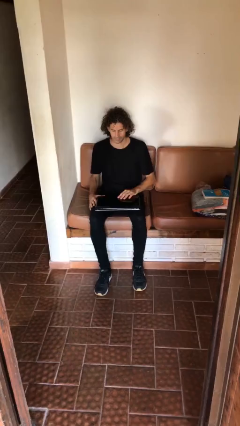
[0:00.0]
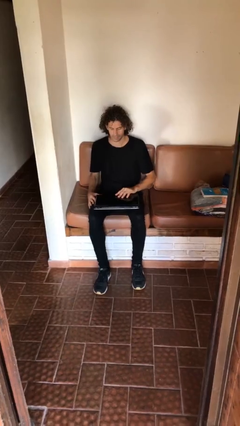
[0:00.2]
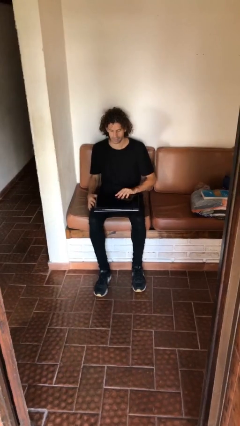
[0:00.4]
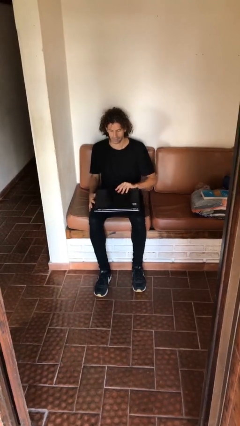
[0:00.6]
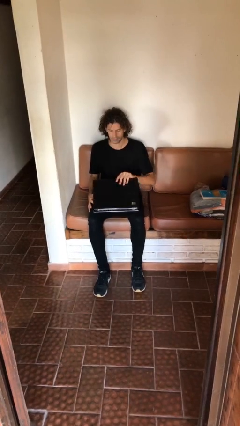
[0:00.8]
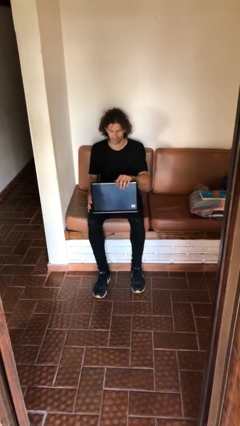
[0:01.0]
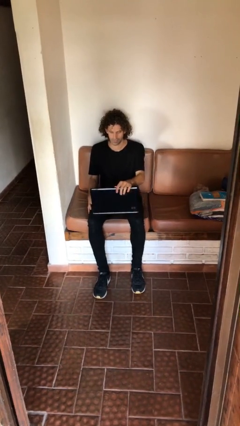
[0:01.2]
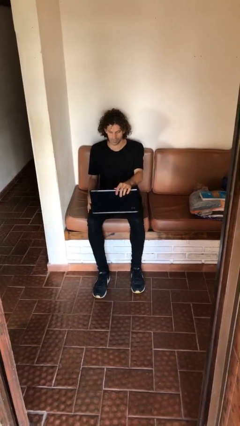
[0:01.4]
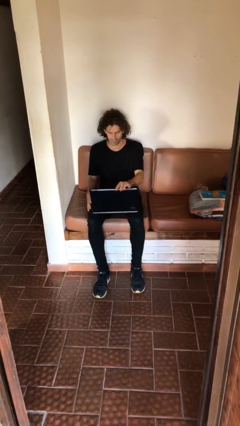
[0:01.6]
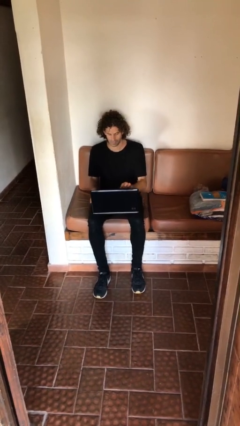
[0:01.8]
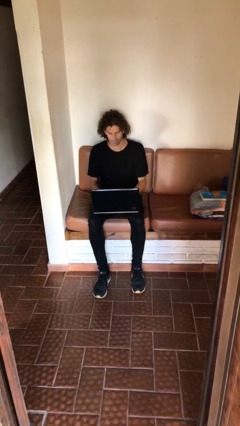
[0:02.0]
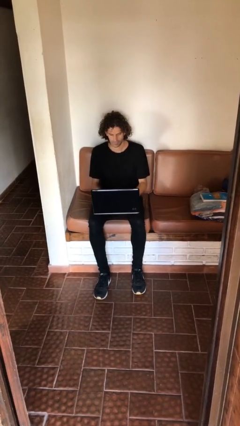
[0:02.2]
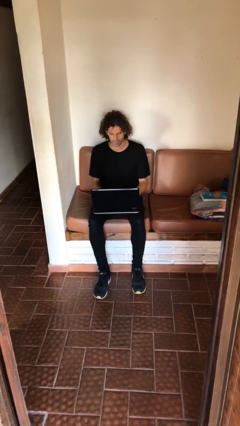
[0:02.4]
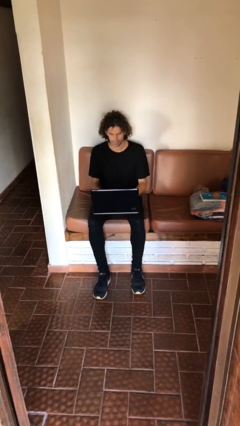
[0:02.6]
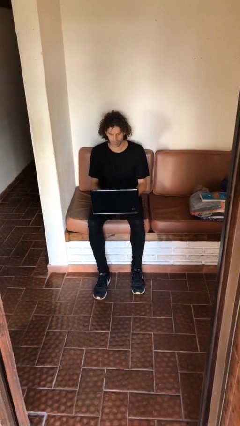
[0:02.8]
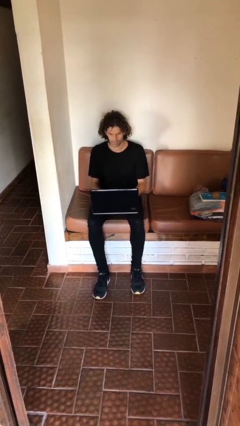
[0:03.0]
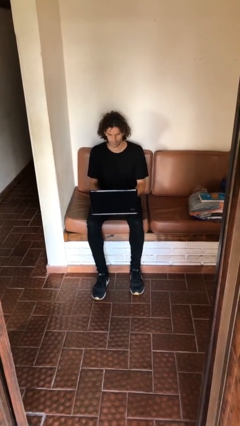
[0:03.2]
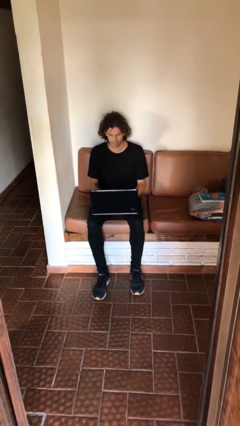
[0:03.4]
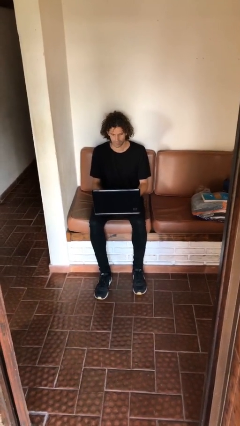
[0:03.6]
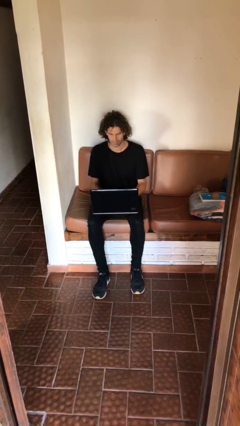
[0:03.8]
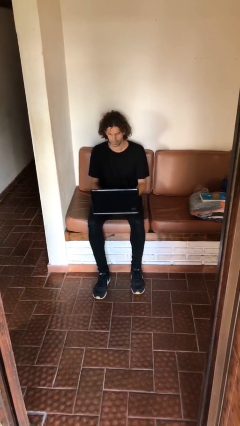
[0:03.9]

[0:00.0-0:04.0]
person interacts with laptop

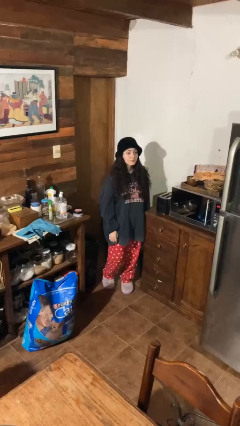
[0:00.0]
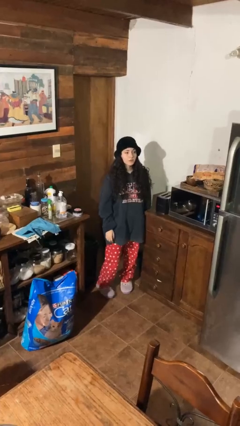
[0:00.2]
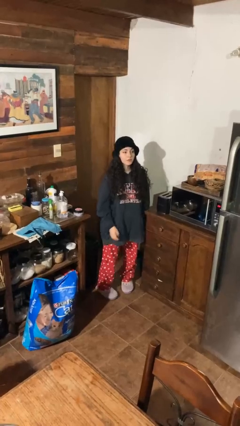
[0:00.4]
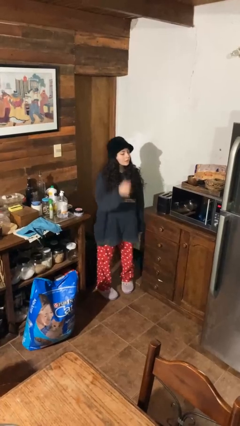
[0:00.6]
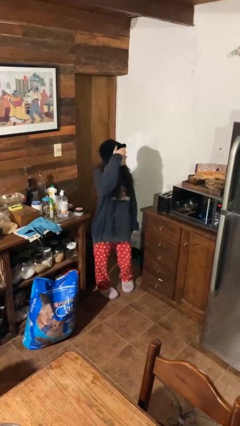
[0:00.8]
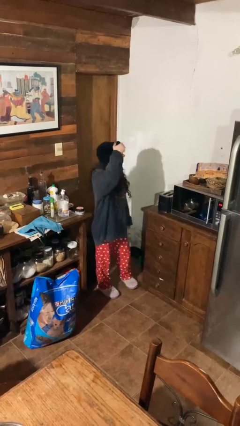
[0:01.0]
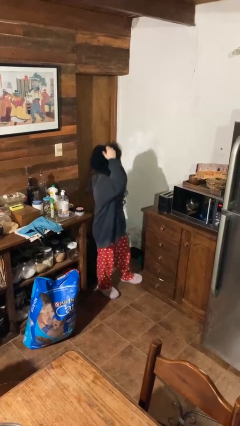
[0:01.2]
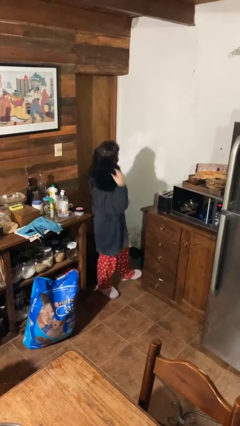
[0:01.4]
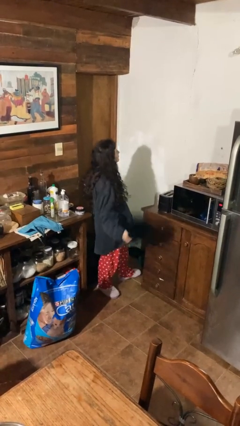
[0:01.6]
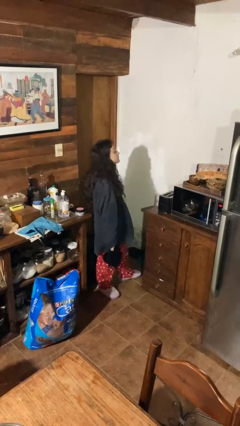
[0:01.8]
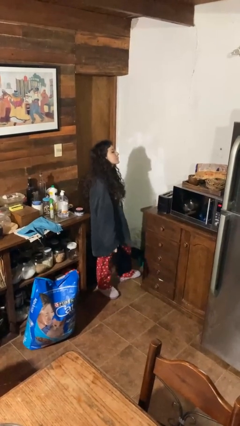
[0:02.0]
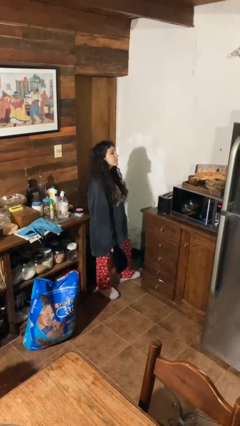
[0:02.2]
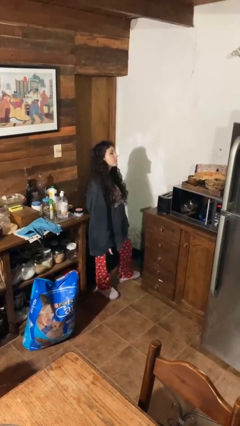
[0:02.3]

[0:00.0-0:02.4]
person takes off hat

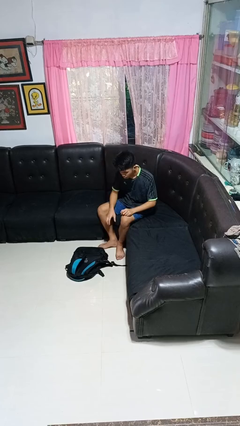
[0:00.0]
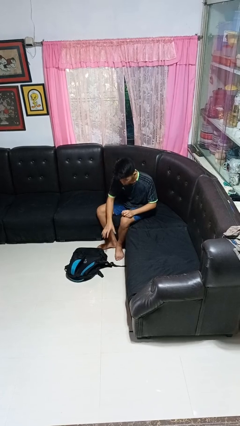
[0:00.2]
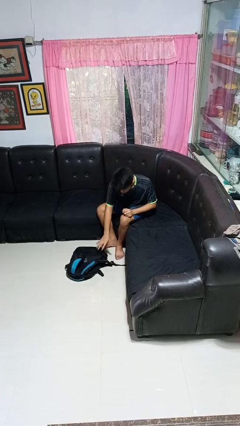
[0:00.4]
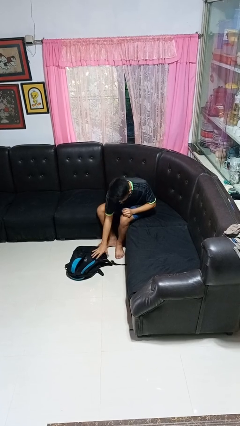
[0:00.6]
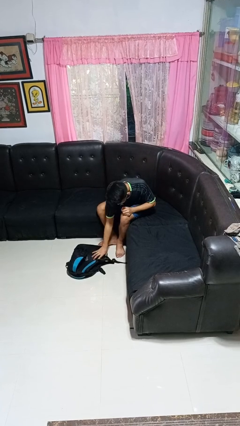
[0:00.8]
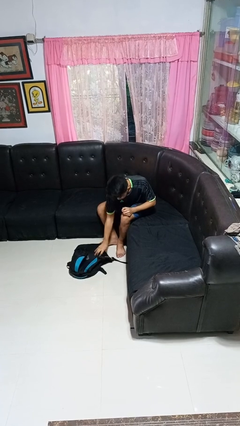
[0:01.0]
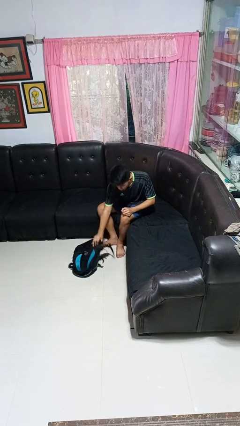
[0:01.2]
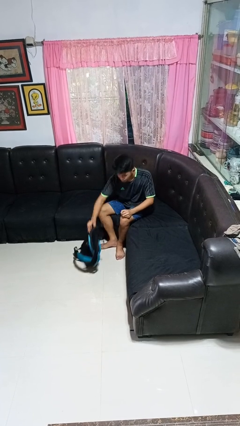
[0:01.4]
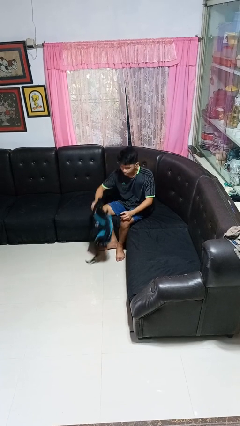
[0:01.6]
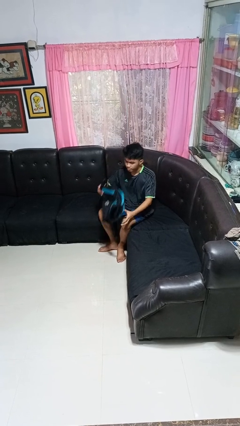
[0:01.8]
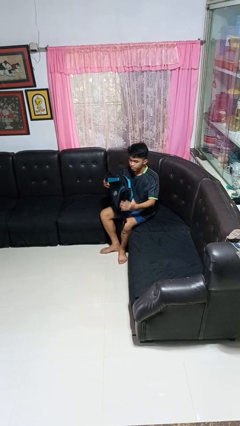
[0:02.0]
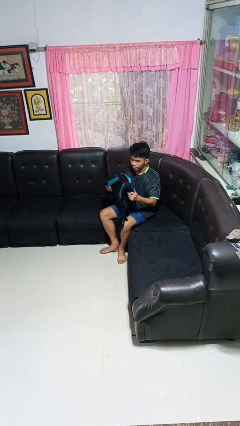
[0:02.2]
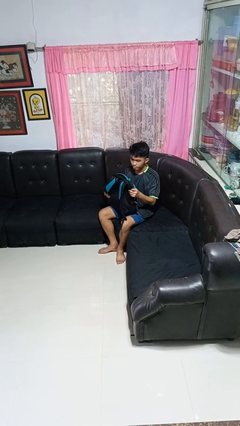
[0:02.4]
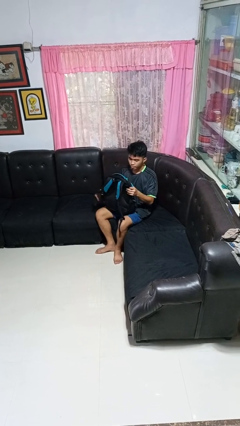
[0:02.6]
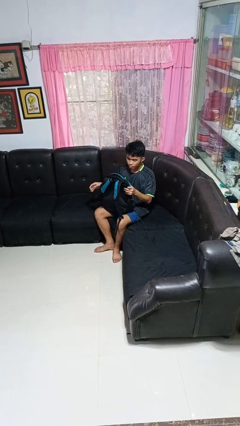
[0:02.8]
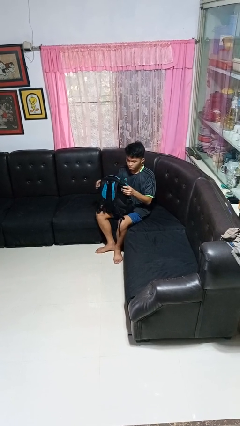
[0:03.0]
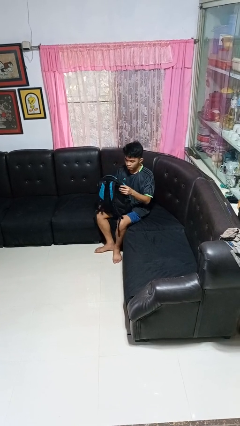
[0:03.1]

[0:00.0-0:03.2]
person picks up object from floor

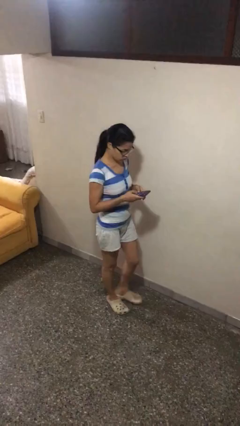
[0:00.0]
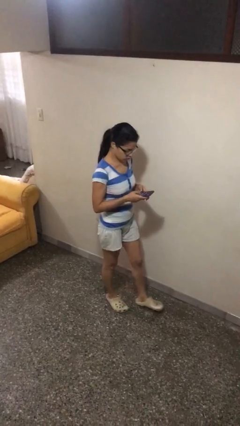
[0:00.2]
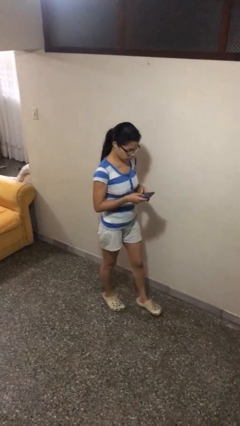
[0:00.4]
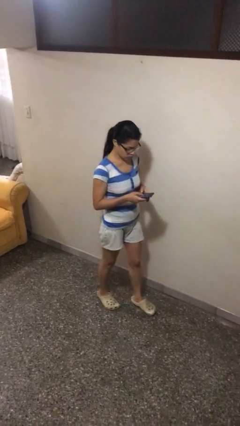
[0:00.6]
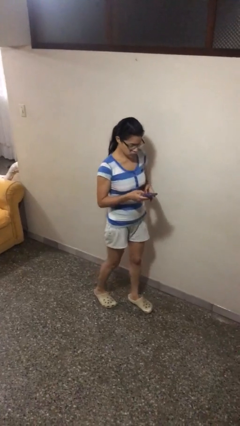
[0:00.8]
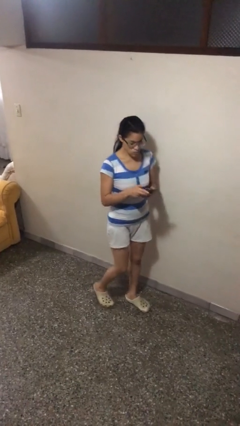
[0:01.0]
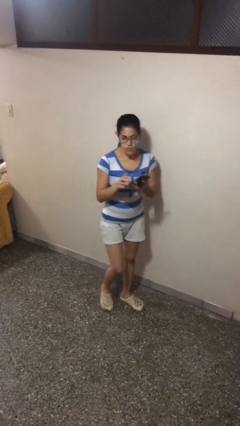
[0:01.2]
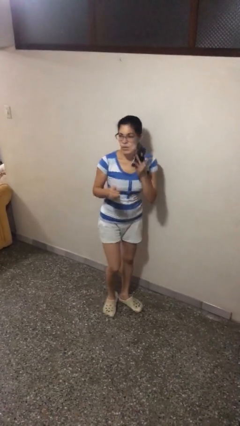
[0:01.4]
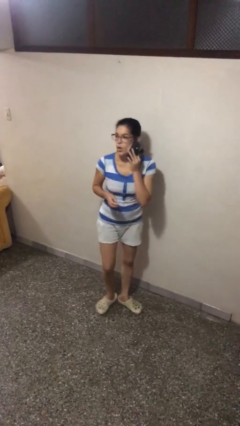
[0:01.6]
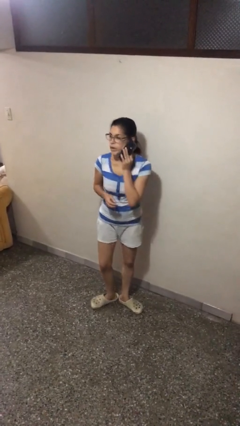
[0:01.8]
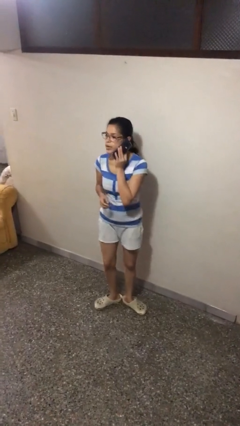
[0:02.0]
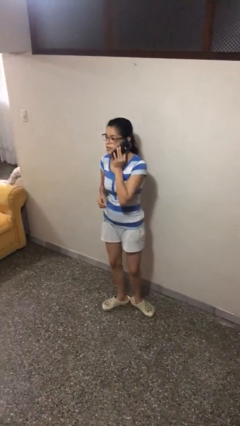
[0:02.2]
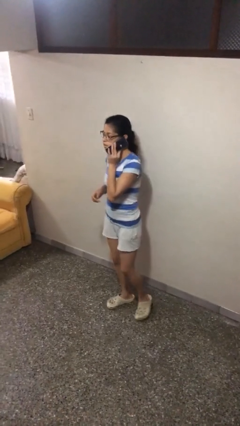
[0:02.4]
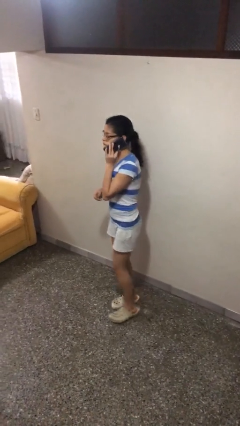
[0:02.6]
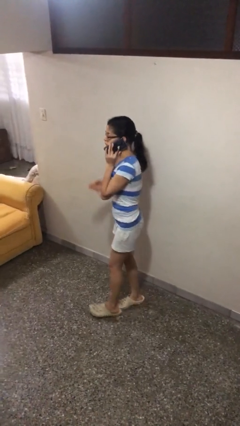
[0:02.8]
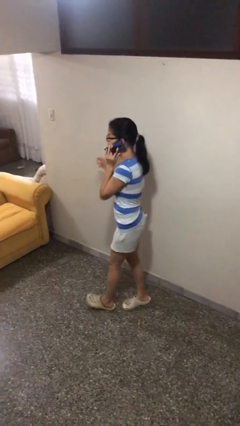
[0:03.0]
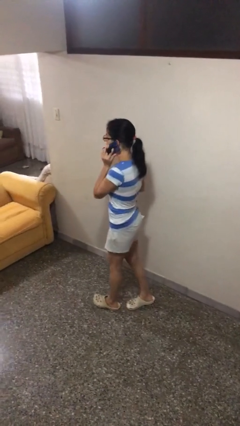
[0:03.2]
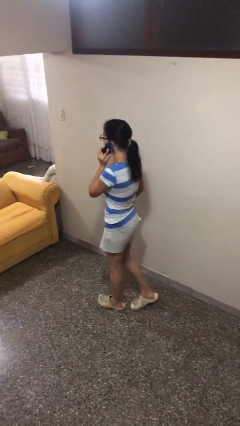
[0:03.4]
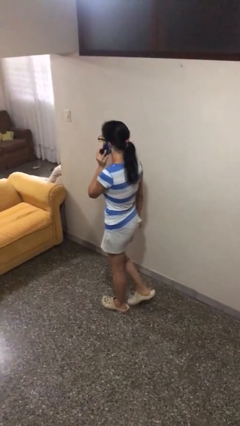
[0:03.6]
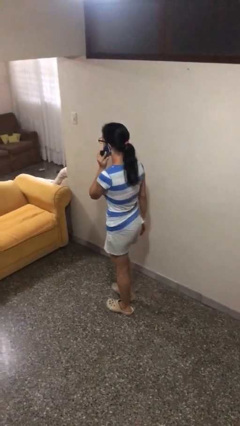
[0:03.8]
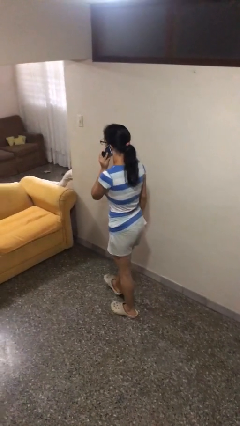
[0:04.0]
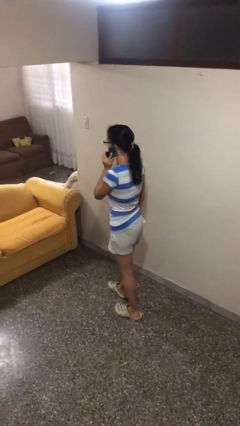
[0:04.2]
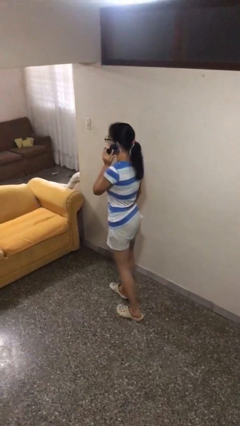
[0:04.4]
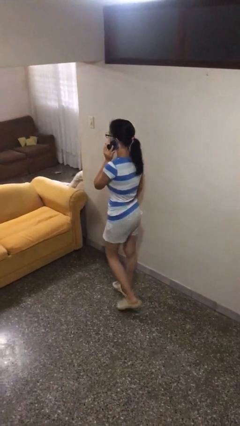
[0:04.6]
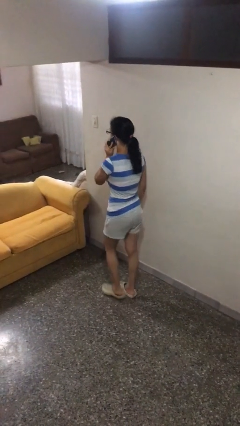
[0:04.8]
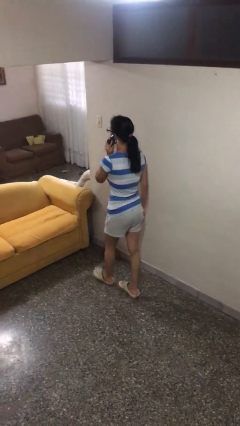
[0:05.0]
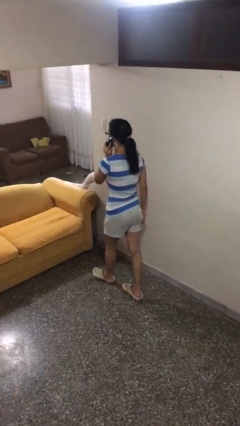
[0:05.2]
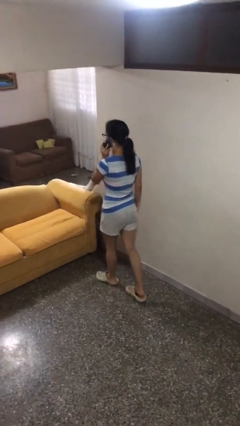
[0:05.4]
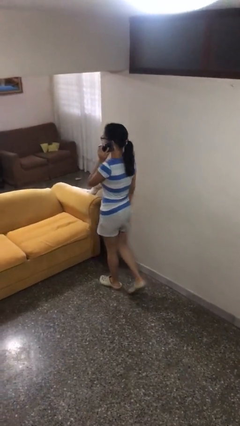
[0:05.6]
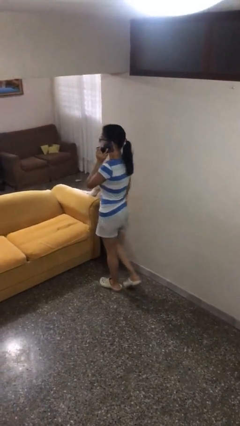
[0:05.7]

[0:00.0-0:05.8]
person talks on phone

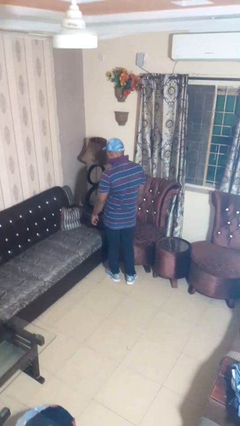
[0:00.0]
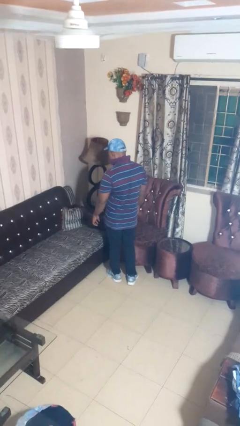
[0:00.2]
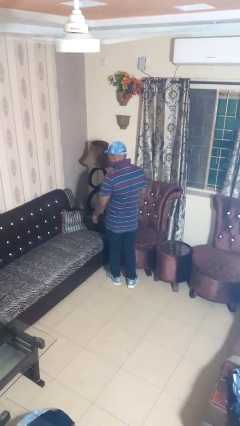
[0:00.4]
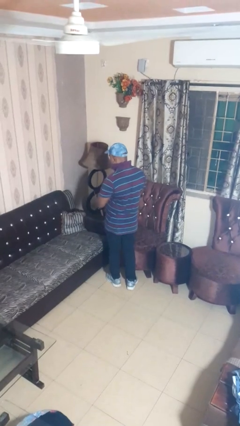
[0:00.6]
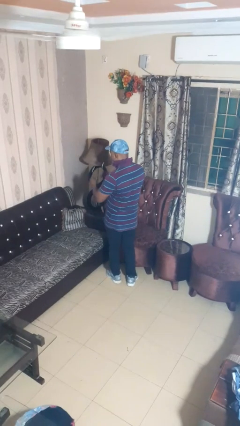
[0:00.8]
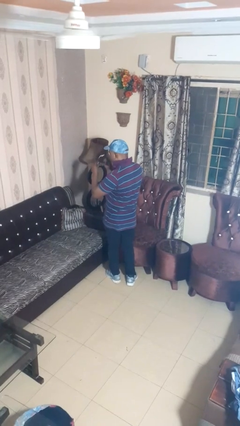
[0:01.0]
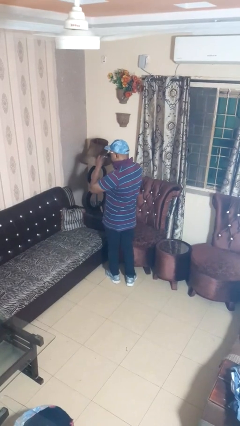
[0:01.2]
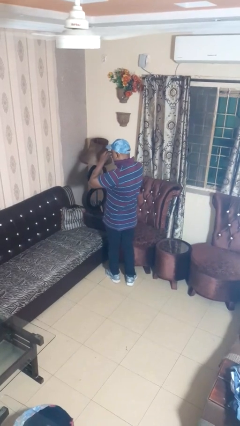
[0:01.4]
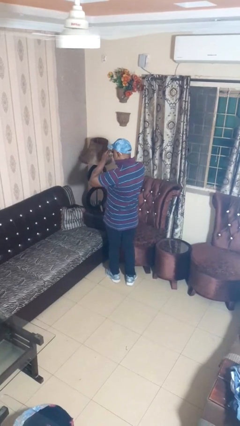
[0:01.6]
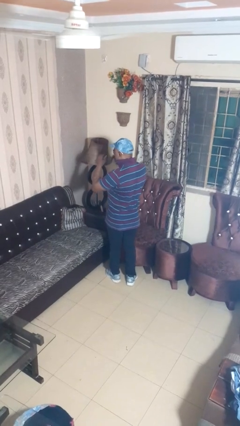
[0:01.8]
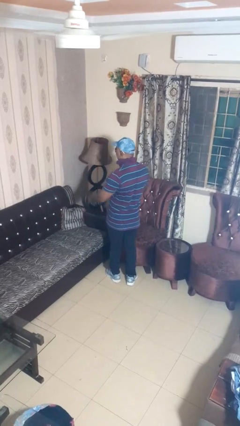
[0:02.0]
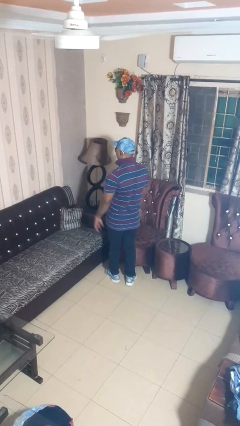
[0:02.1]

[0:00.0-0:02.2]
person puts on sunglasses
